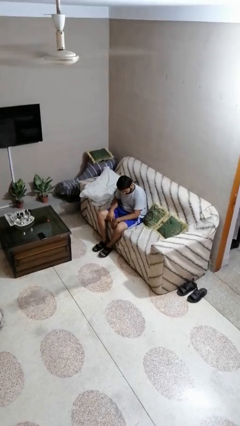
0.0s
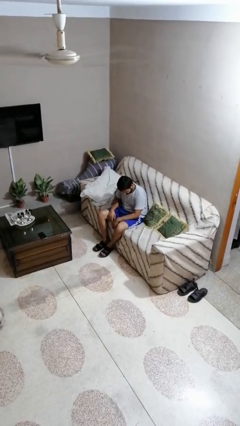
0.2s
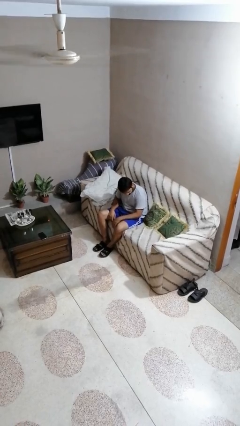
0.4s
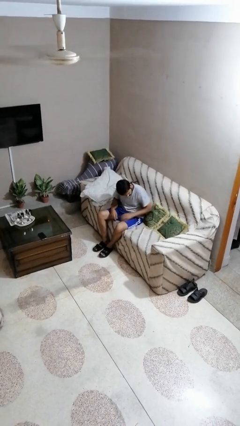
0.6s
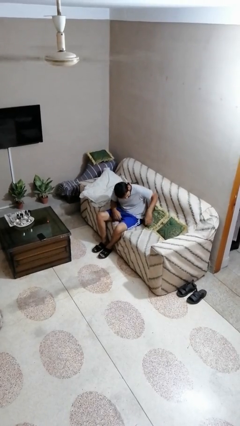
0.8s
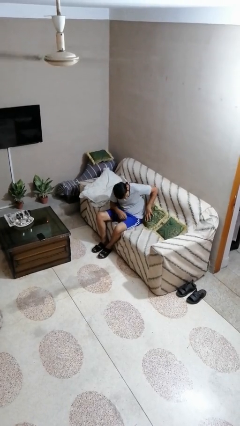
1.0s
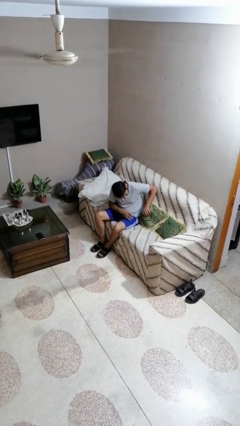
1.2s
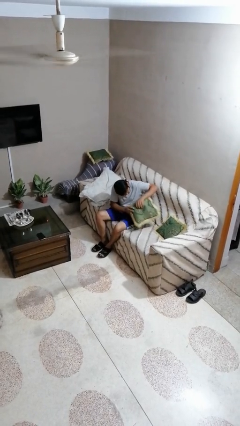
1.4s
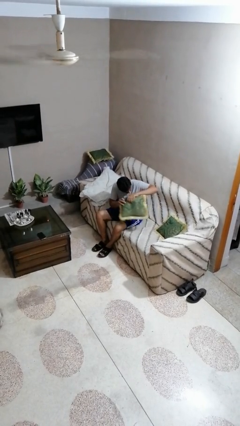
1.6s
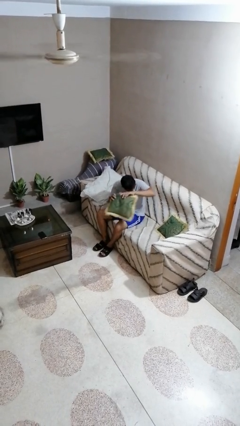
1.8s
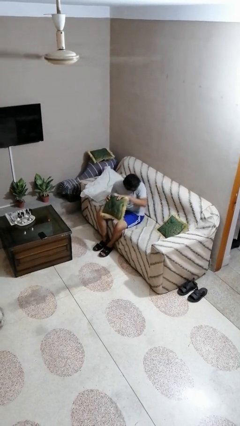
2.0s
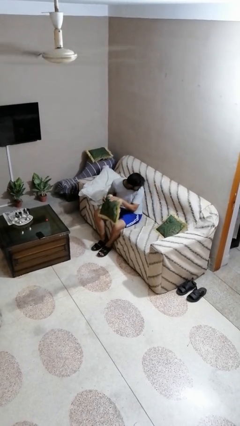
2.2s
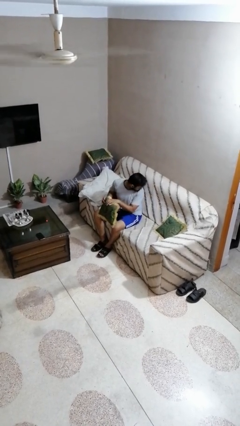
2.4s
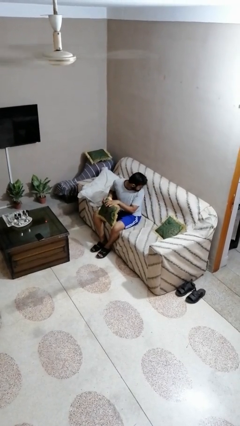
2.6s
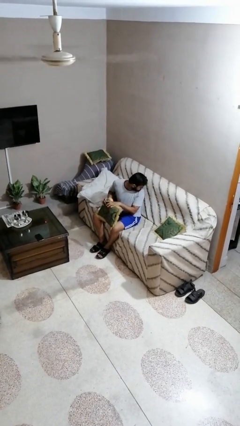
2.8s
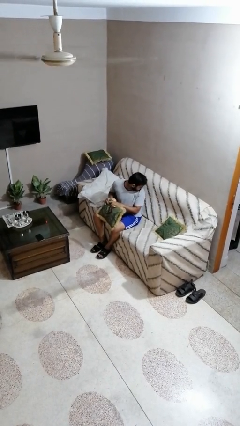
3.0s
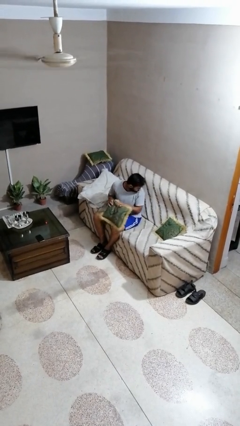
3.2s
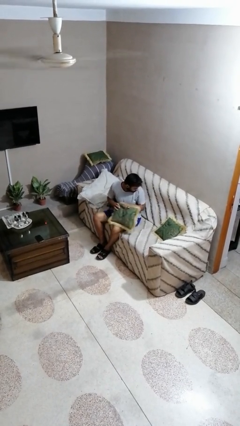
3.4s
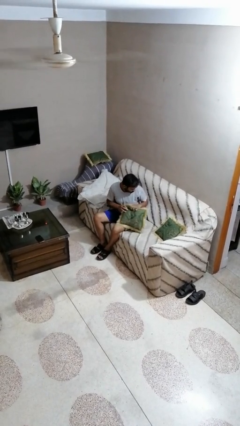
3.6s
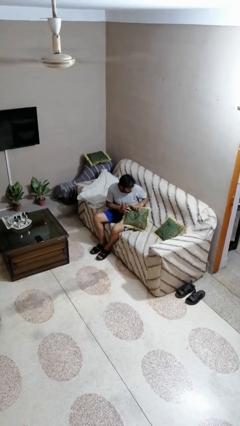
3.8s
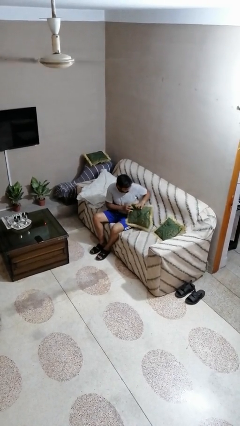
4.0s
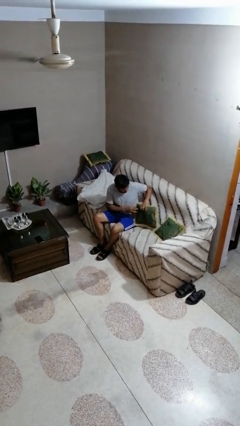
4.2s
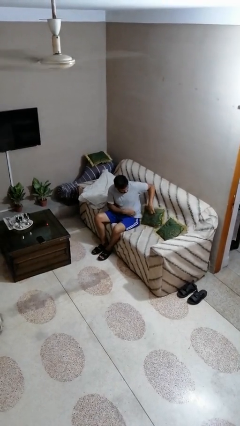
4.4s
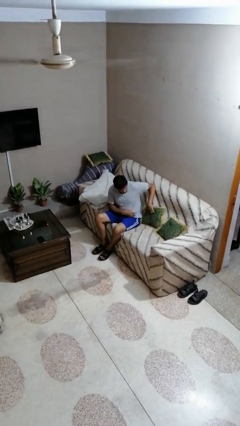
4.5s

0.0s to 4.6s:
person searches in couch

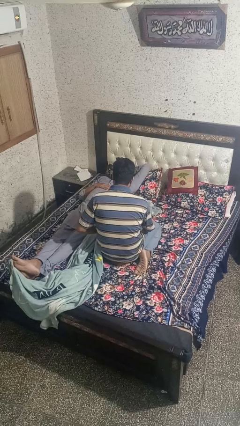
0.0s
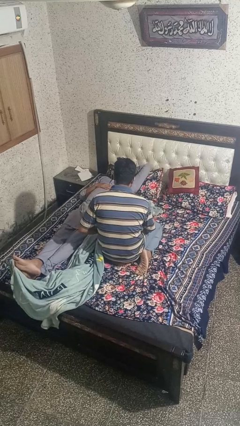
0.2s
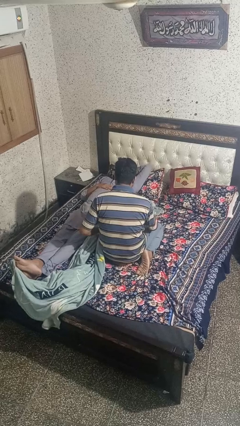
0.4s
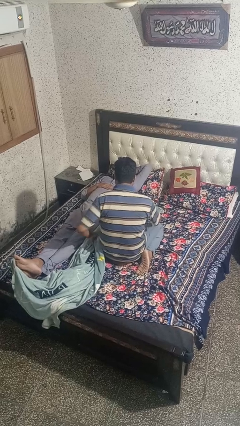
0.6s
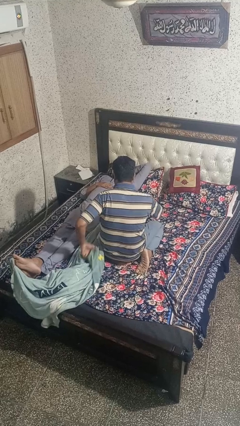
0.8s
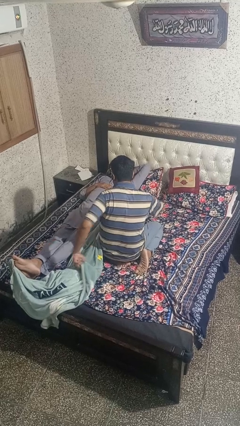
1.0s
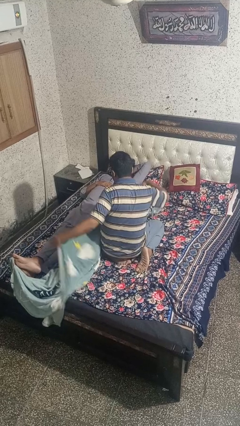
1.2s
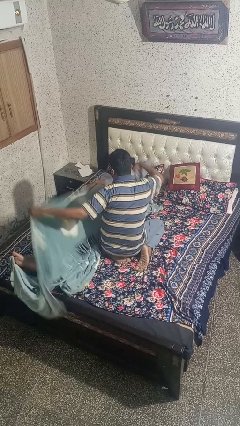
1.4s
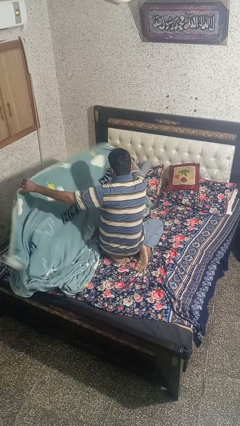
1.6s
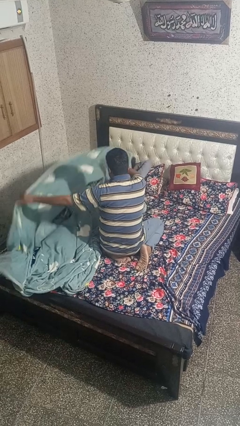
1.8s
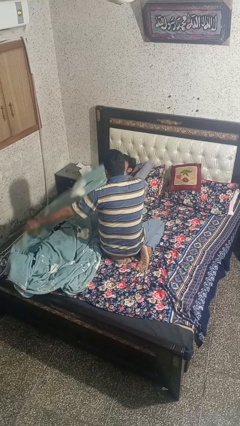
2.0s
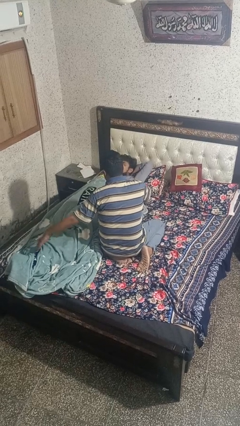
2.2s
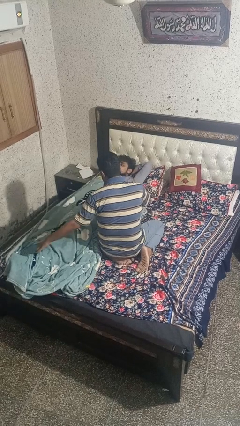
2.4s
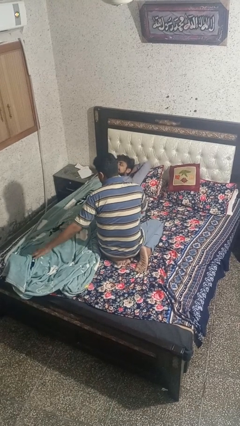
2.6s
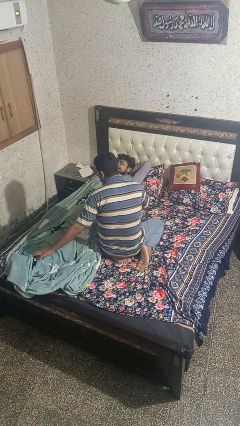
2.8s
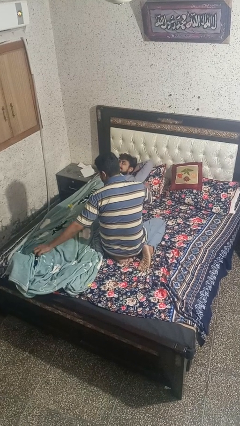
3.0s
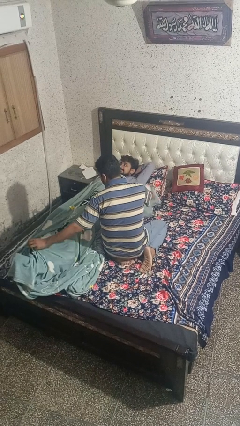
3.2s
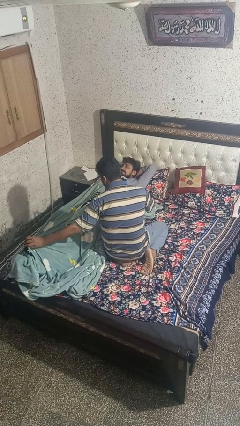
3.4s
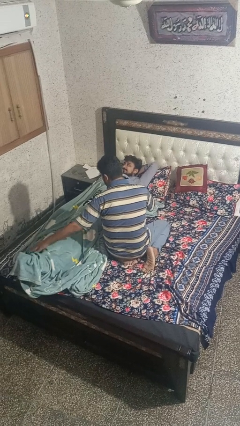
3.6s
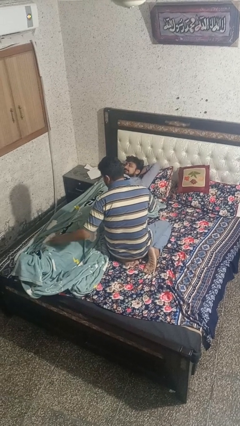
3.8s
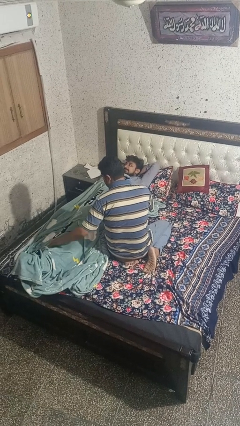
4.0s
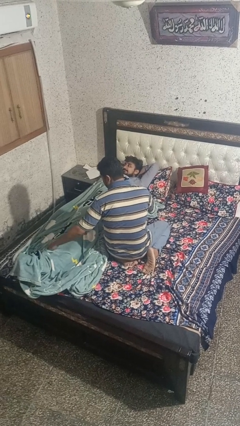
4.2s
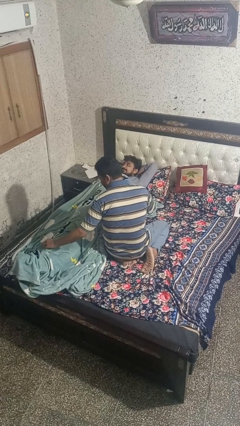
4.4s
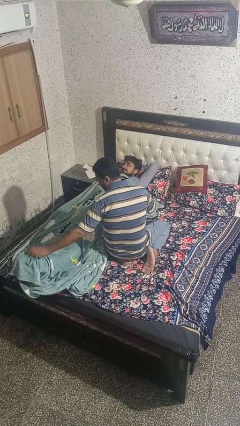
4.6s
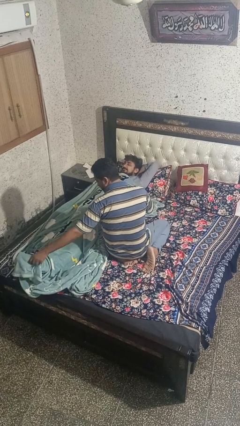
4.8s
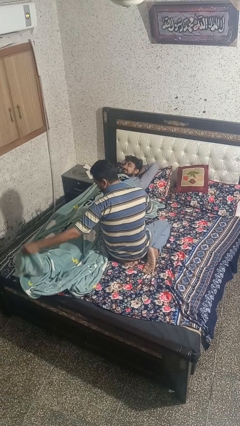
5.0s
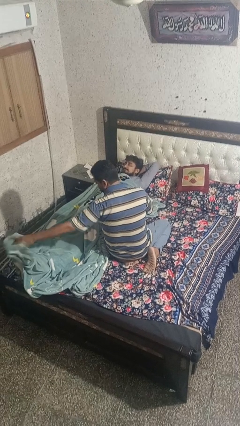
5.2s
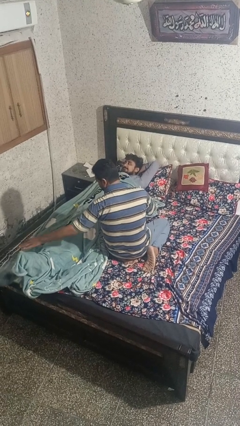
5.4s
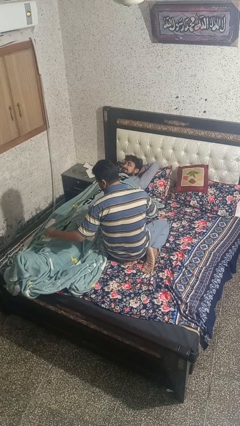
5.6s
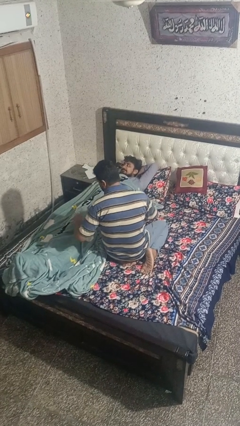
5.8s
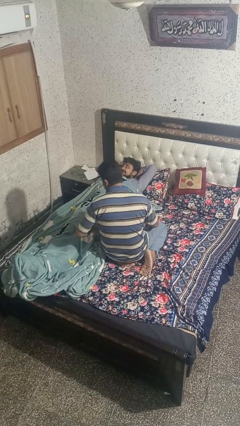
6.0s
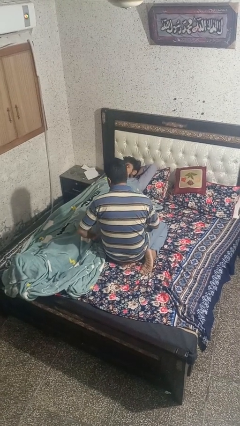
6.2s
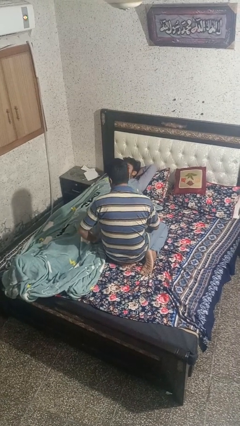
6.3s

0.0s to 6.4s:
person covers friend with blanket

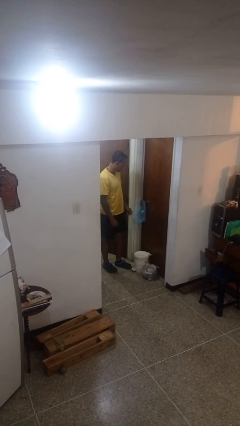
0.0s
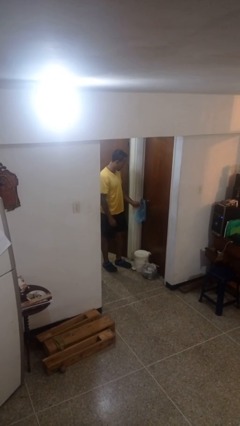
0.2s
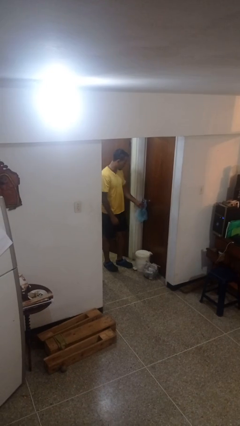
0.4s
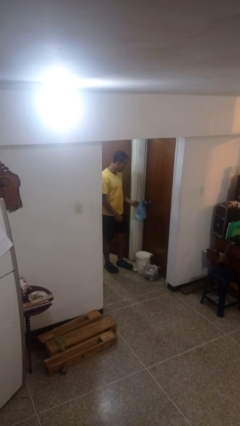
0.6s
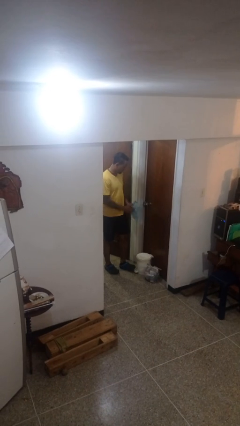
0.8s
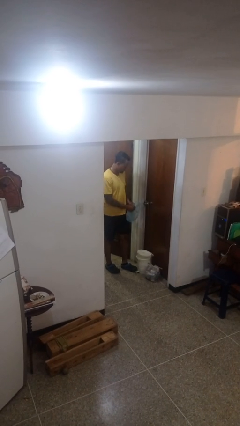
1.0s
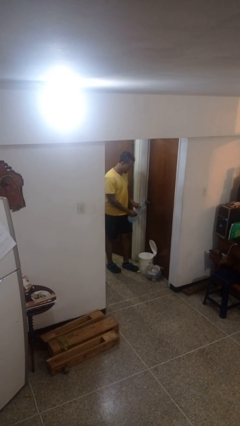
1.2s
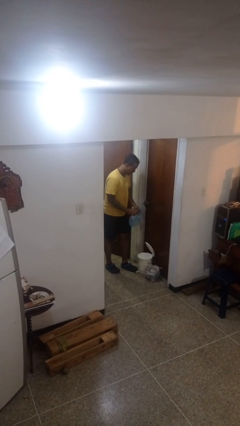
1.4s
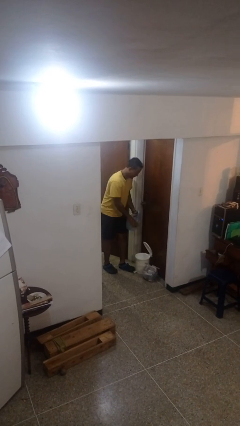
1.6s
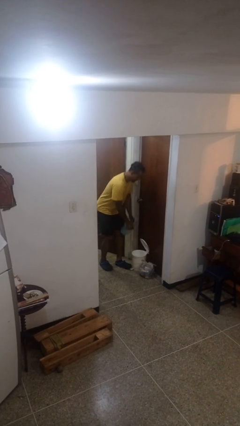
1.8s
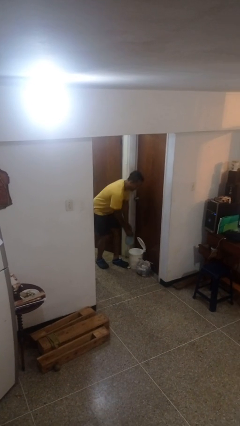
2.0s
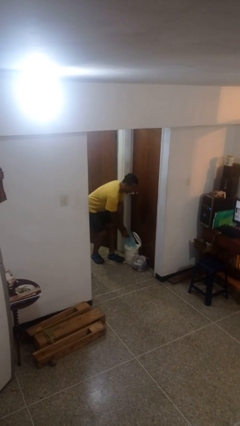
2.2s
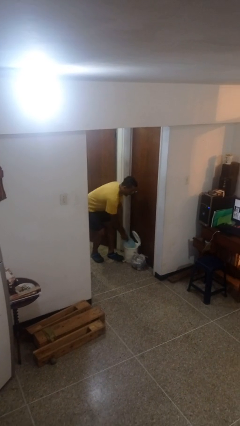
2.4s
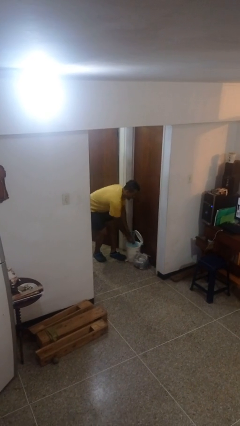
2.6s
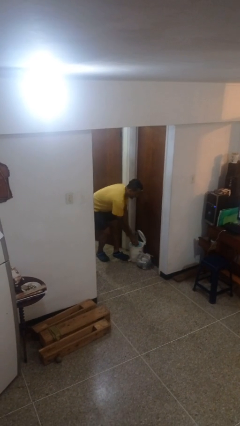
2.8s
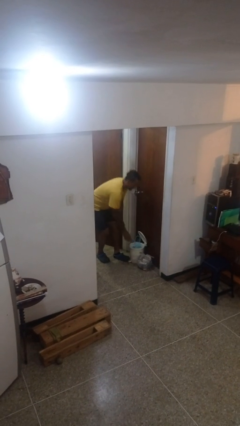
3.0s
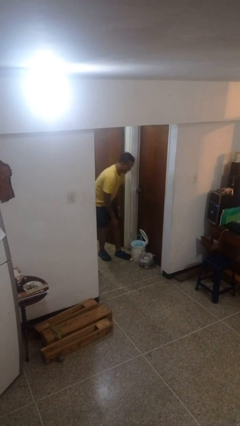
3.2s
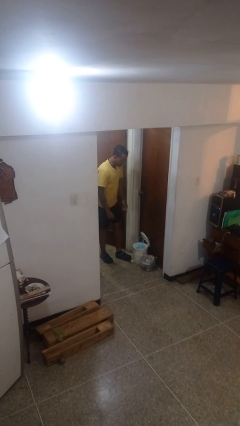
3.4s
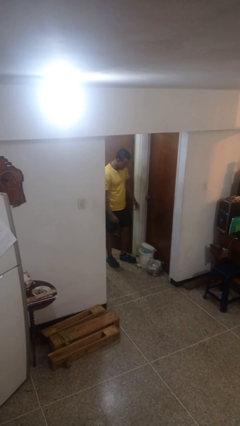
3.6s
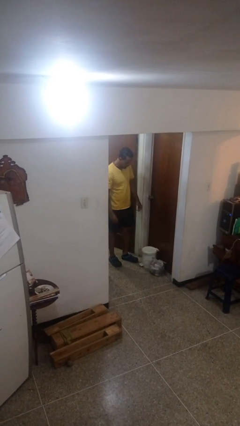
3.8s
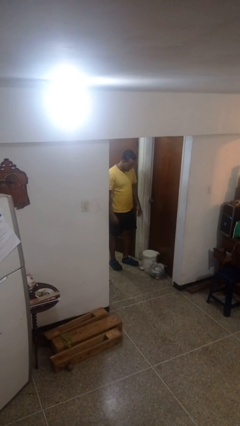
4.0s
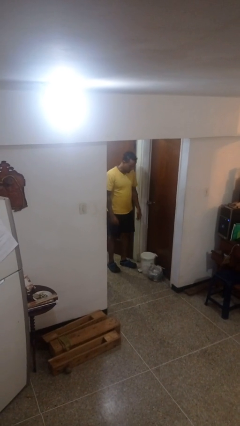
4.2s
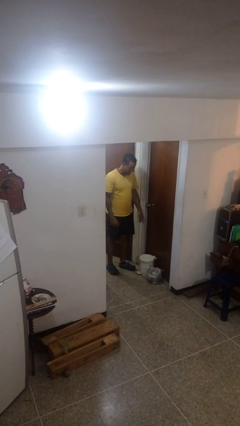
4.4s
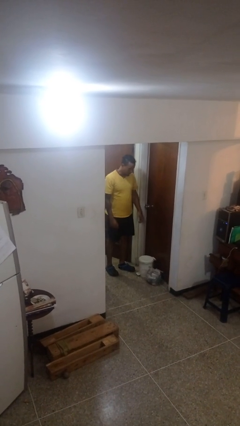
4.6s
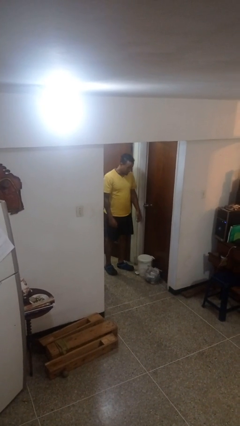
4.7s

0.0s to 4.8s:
person inserts trashbag into trashcan

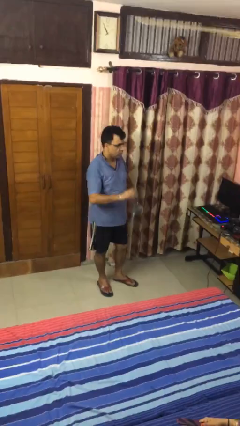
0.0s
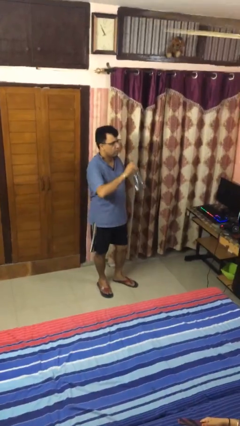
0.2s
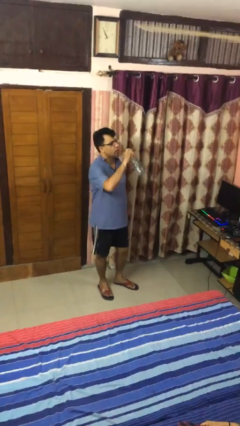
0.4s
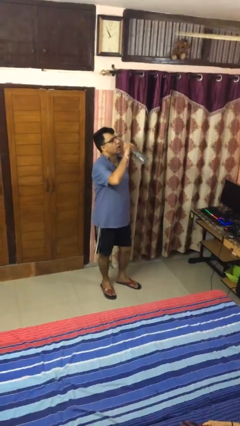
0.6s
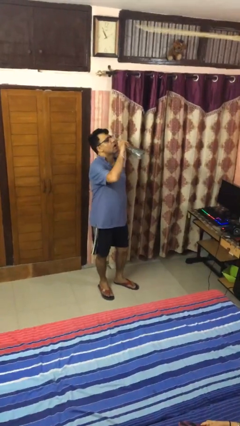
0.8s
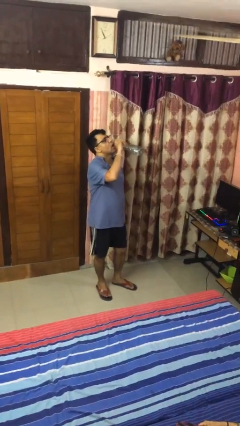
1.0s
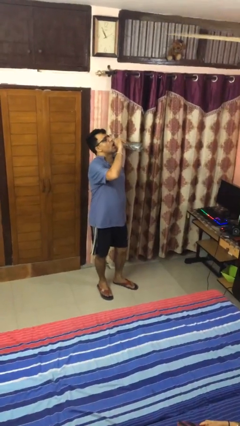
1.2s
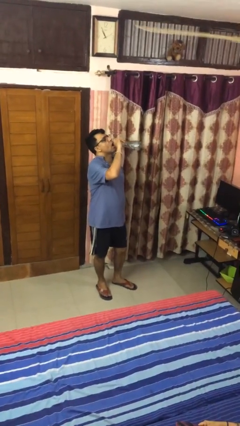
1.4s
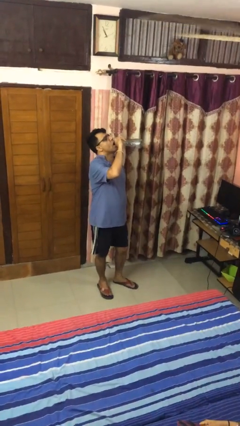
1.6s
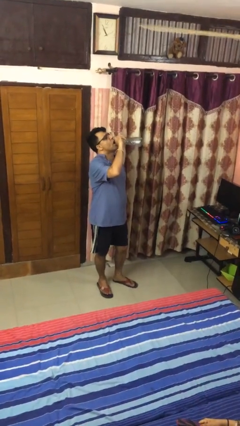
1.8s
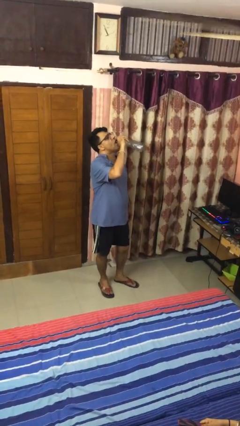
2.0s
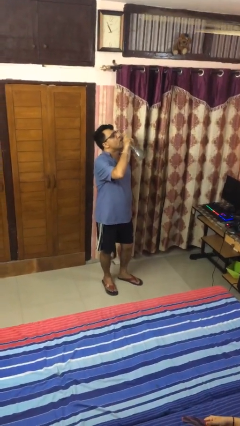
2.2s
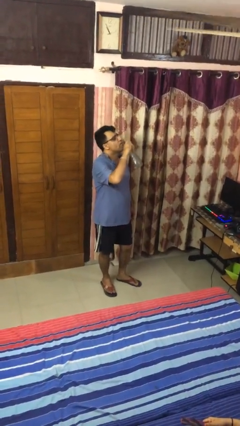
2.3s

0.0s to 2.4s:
person drinks from bottle

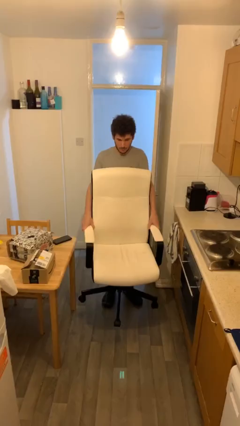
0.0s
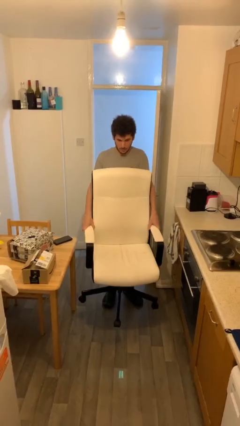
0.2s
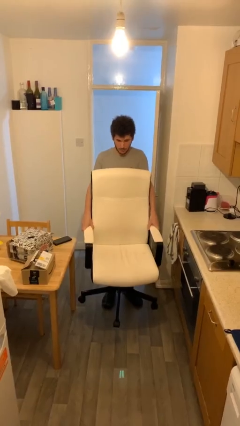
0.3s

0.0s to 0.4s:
person puts down object on floor
